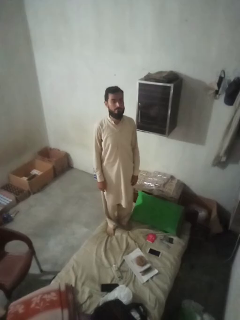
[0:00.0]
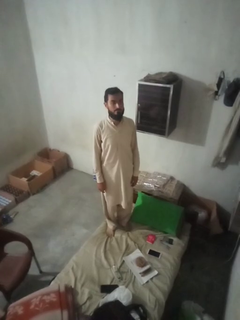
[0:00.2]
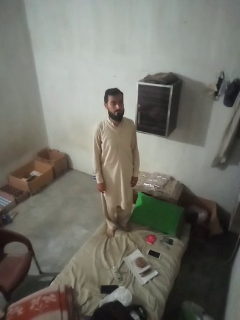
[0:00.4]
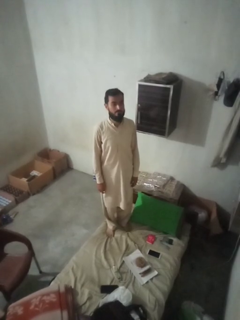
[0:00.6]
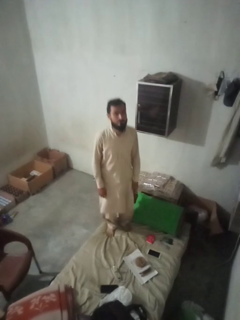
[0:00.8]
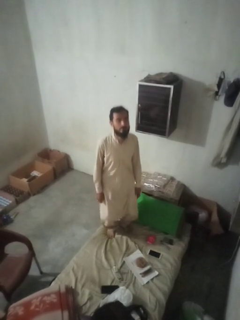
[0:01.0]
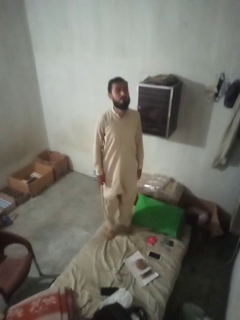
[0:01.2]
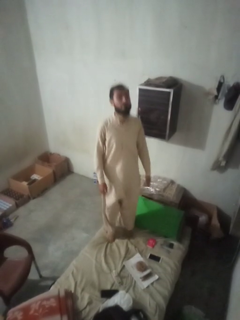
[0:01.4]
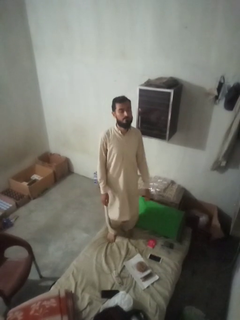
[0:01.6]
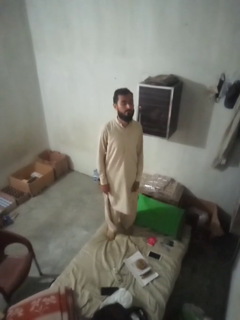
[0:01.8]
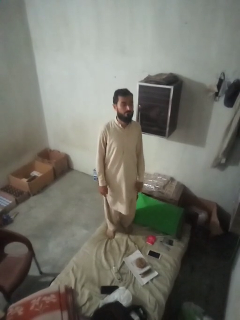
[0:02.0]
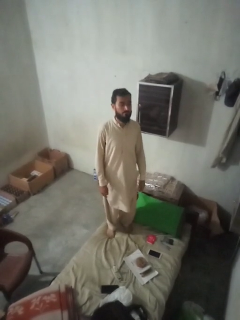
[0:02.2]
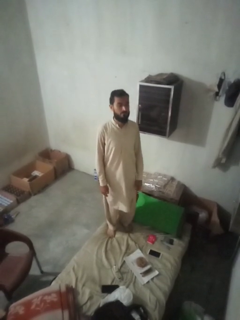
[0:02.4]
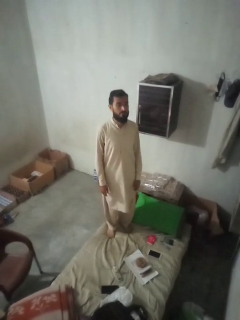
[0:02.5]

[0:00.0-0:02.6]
person jumps on bed

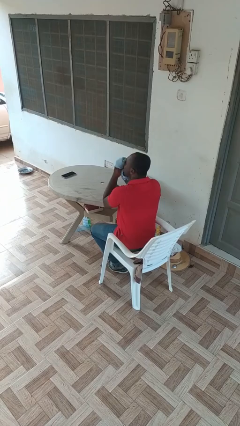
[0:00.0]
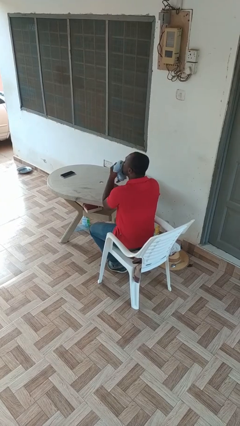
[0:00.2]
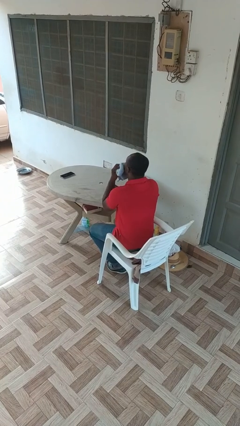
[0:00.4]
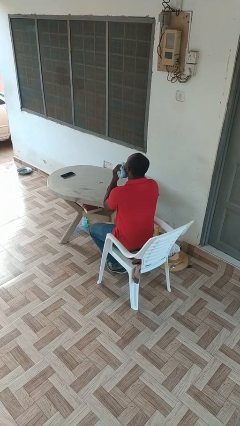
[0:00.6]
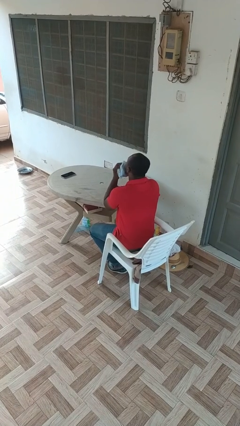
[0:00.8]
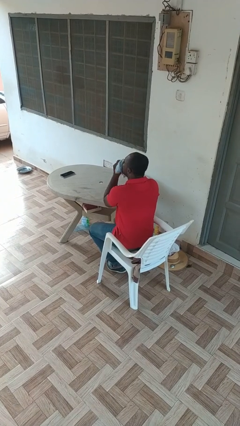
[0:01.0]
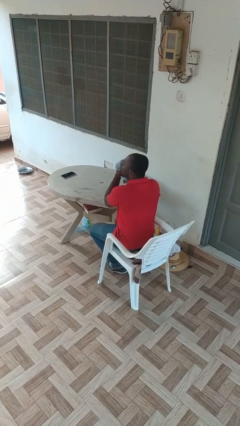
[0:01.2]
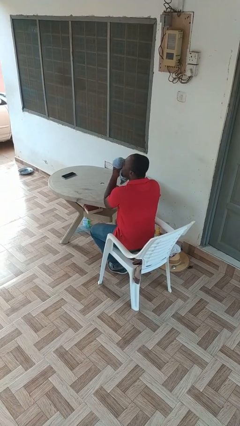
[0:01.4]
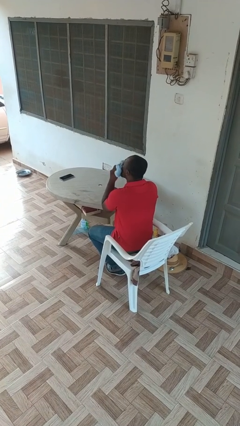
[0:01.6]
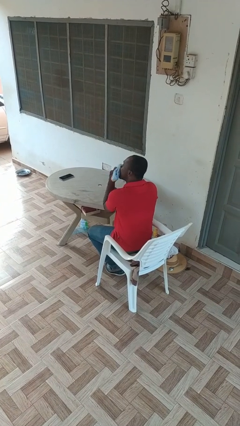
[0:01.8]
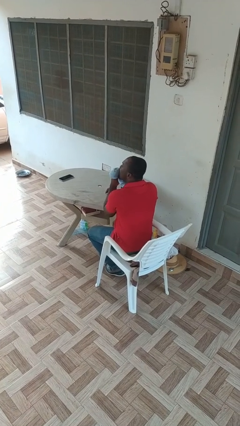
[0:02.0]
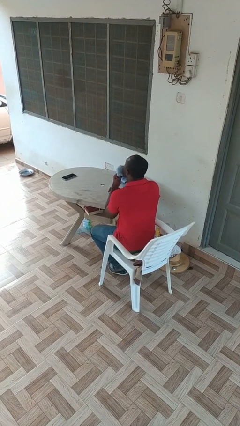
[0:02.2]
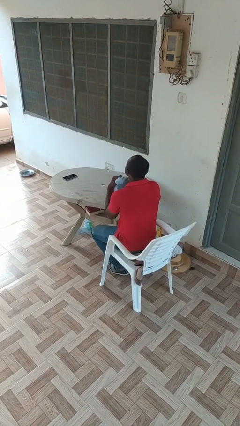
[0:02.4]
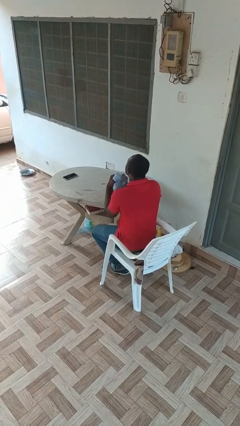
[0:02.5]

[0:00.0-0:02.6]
person wipes mouth with napkin

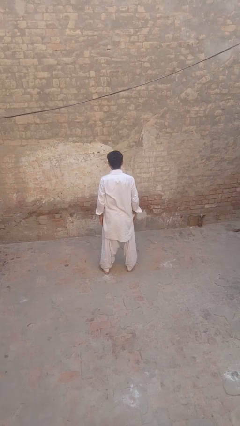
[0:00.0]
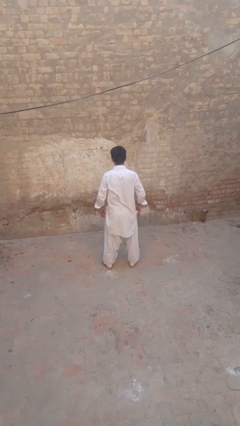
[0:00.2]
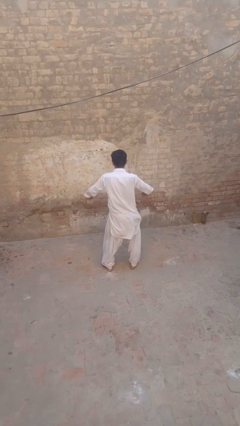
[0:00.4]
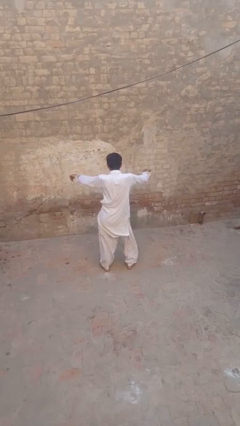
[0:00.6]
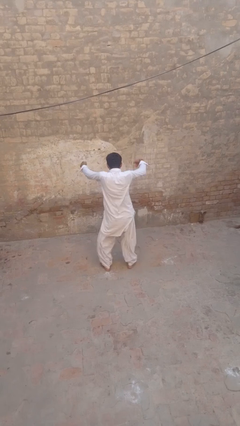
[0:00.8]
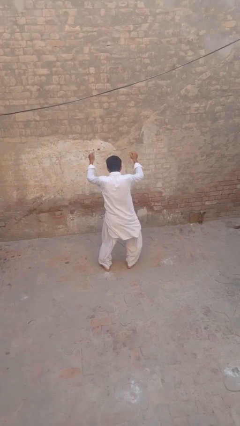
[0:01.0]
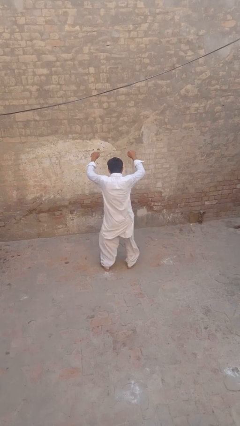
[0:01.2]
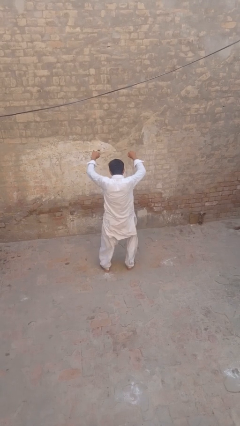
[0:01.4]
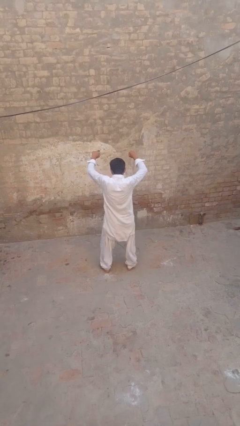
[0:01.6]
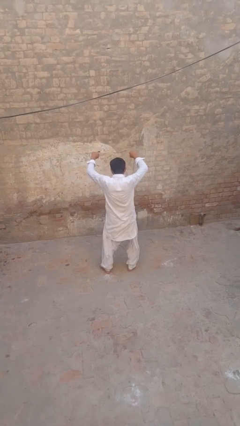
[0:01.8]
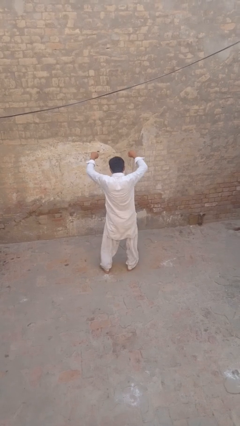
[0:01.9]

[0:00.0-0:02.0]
person dances in place

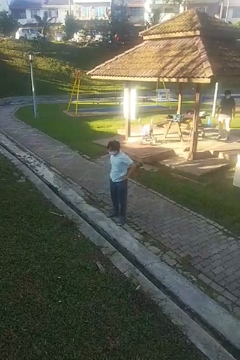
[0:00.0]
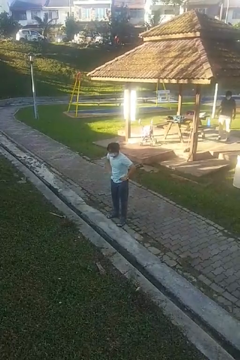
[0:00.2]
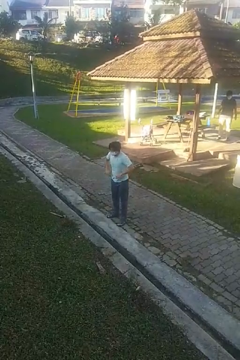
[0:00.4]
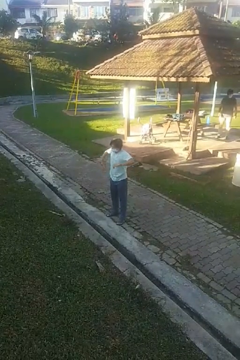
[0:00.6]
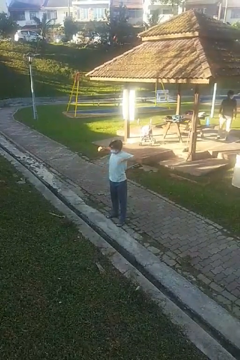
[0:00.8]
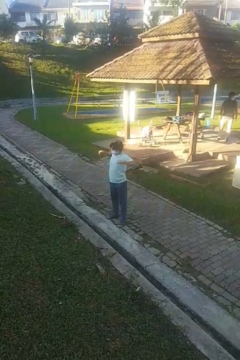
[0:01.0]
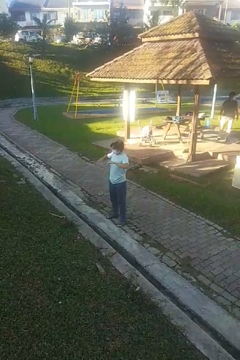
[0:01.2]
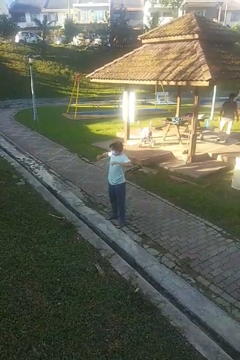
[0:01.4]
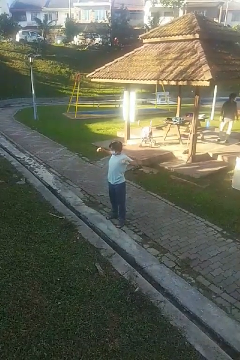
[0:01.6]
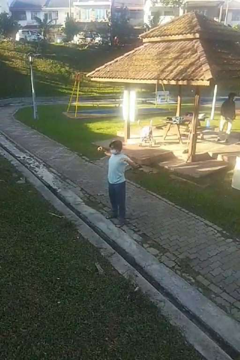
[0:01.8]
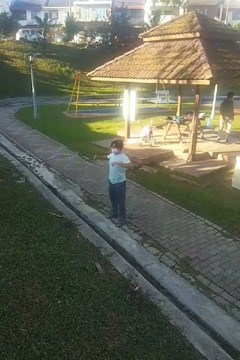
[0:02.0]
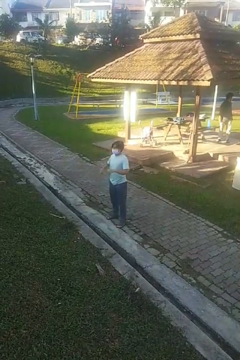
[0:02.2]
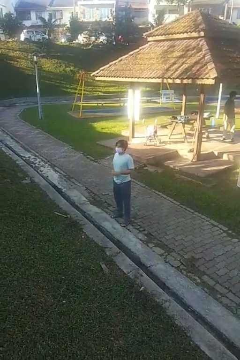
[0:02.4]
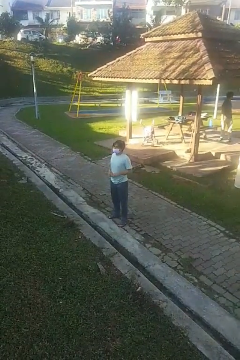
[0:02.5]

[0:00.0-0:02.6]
person stretches arms to side

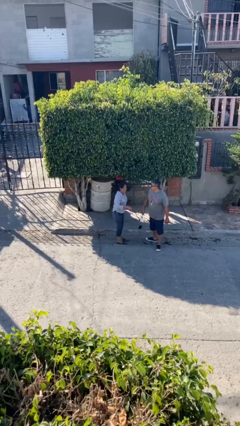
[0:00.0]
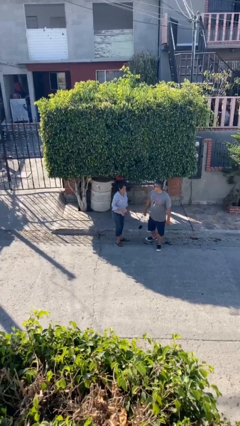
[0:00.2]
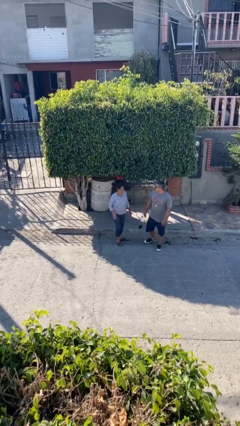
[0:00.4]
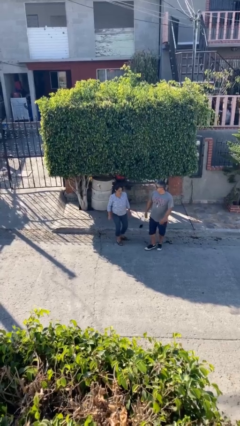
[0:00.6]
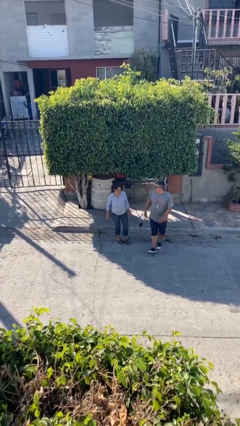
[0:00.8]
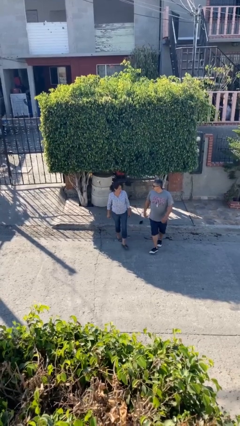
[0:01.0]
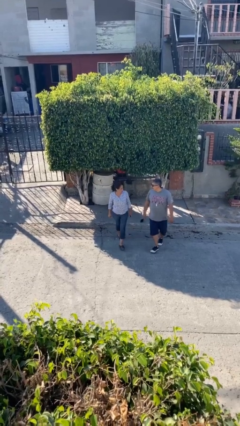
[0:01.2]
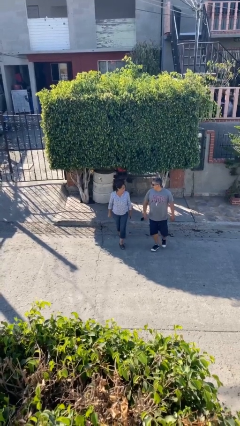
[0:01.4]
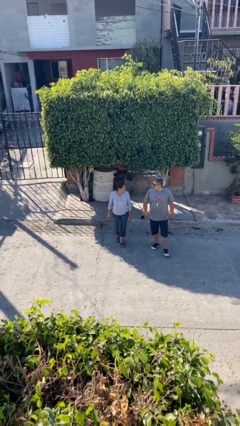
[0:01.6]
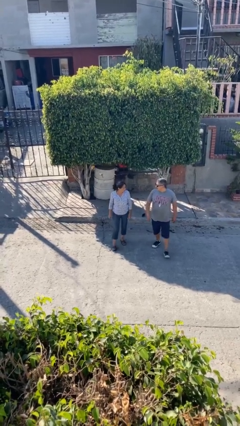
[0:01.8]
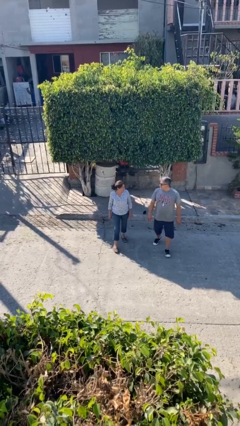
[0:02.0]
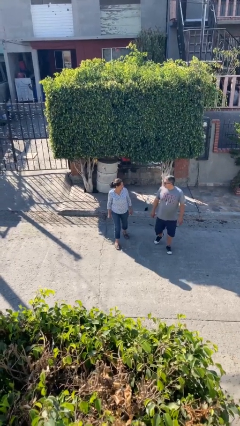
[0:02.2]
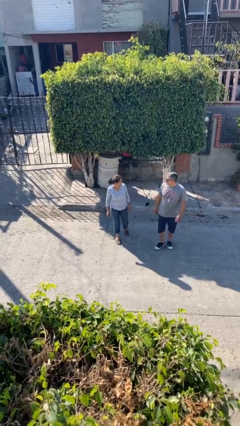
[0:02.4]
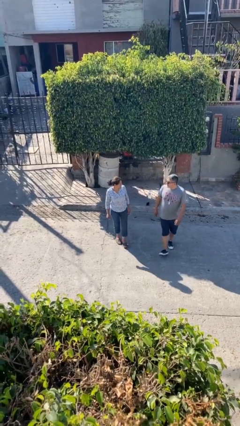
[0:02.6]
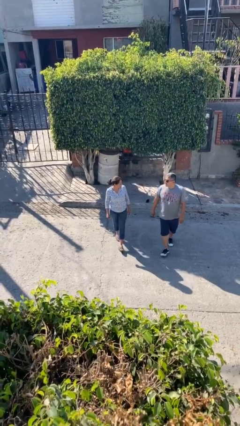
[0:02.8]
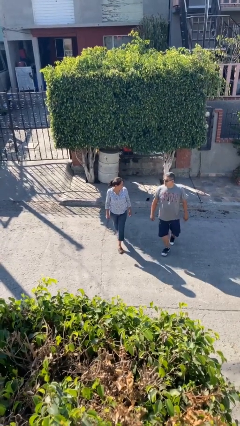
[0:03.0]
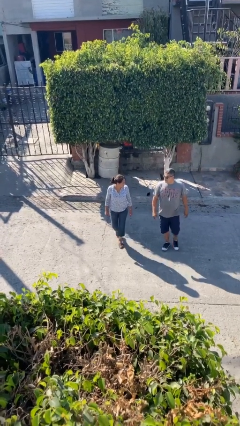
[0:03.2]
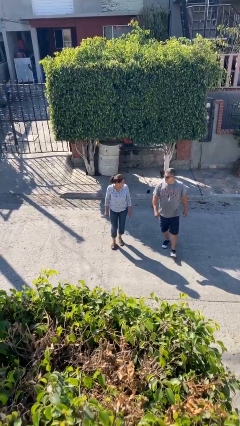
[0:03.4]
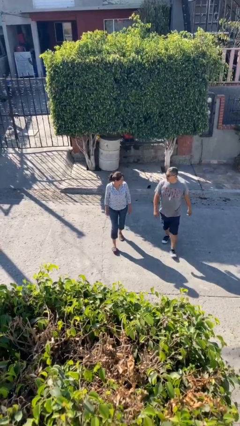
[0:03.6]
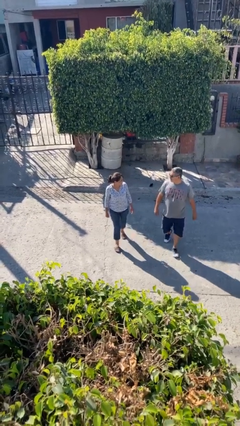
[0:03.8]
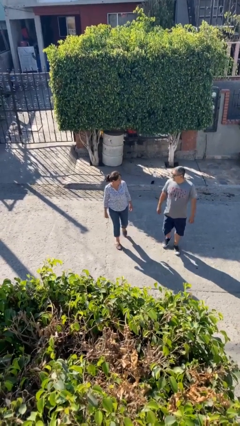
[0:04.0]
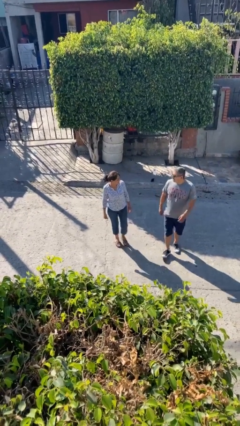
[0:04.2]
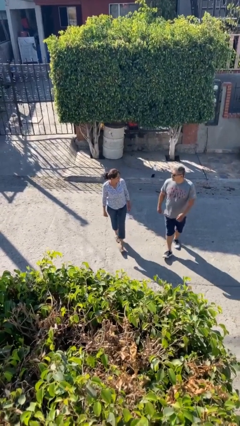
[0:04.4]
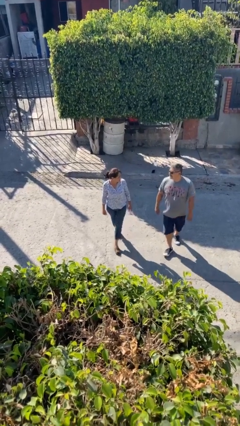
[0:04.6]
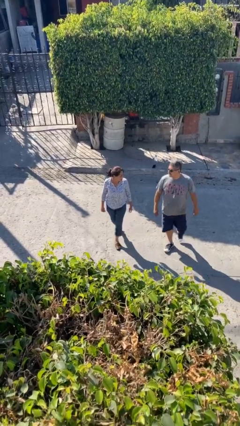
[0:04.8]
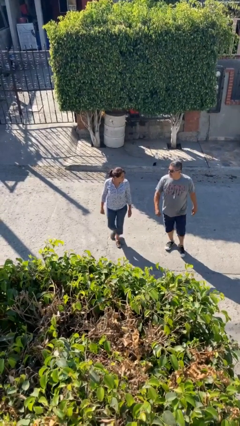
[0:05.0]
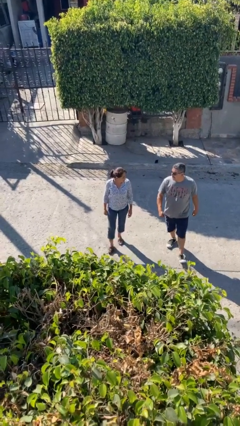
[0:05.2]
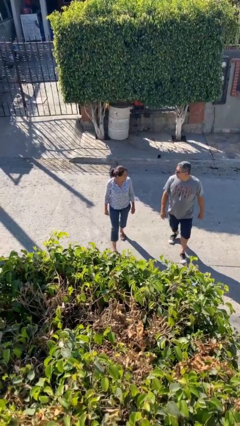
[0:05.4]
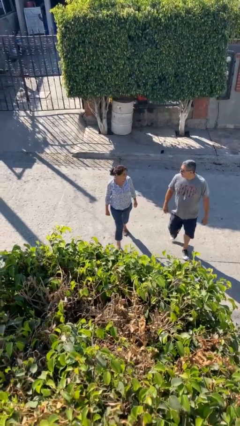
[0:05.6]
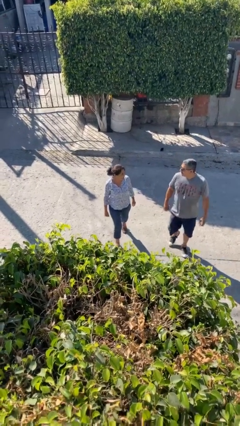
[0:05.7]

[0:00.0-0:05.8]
person talks to person

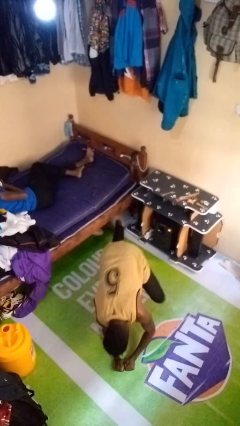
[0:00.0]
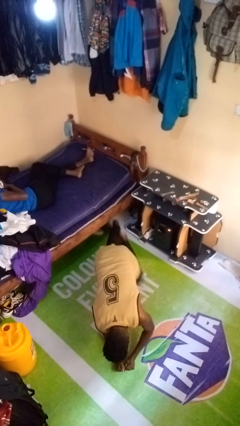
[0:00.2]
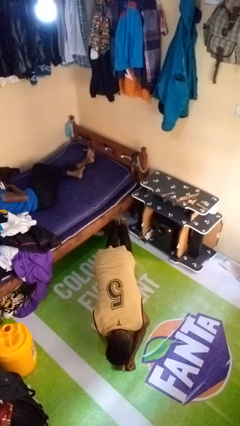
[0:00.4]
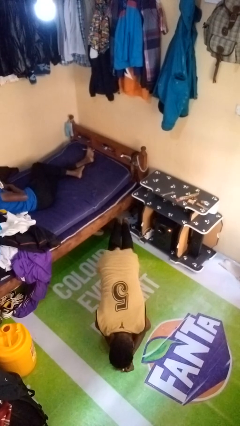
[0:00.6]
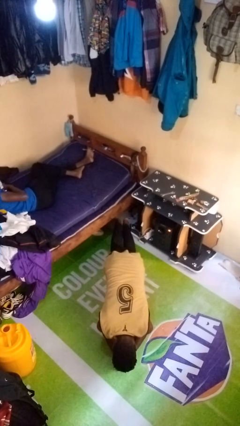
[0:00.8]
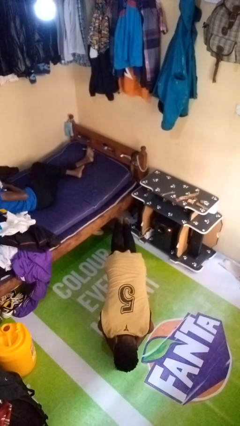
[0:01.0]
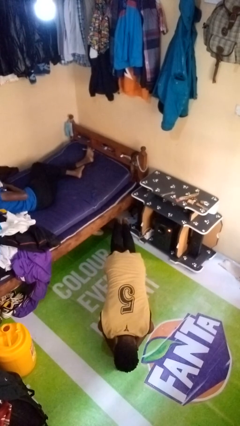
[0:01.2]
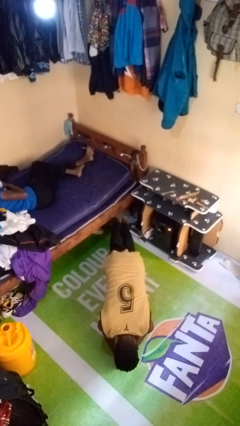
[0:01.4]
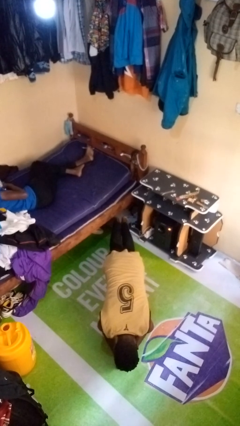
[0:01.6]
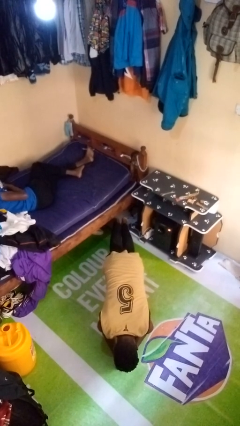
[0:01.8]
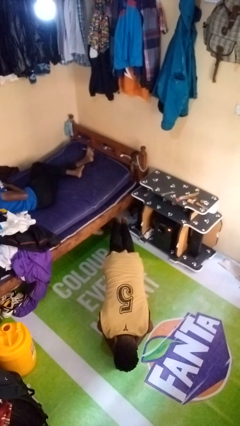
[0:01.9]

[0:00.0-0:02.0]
person exercises with plank

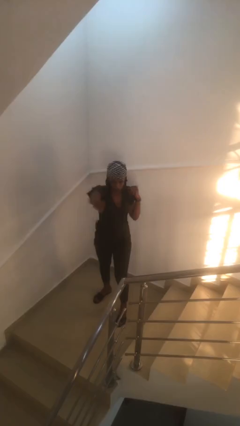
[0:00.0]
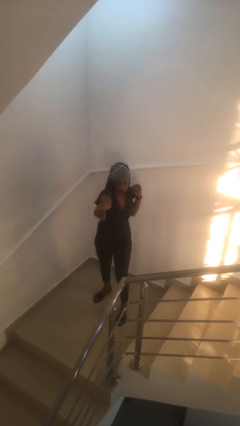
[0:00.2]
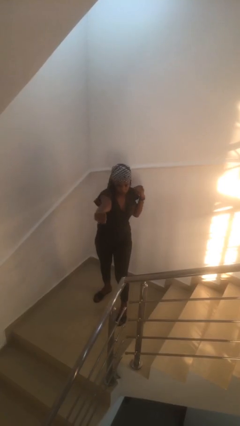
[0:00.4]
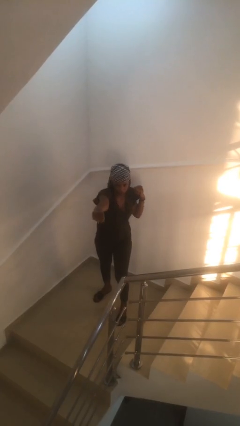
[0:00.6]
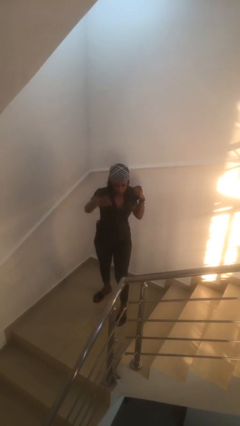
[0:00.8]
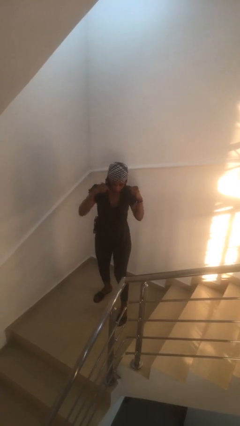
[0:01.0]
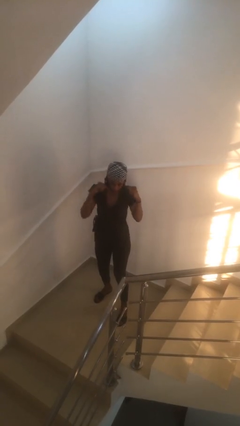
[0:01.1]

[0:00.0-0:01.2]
person punches
